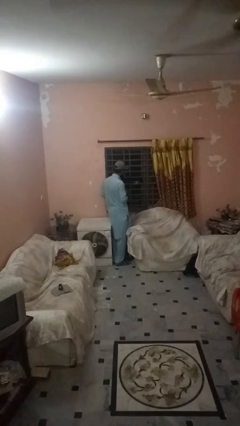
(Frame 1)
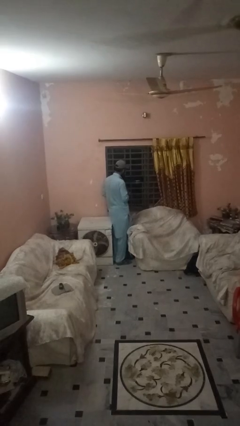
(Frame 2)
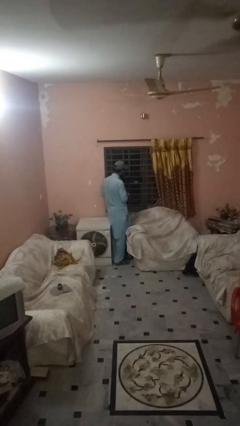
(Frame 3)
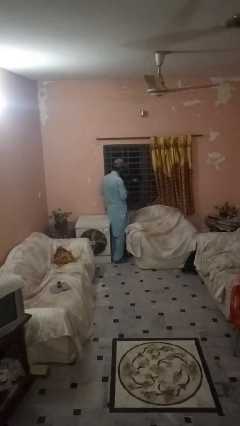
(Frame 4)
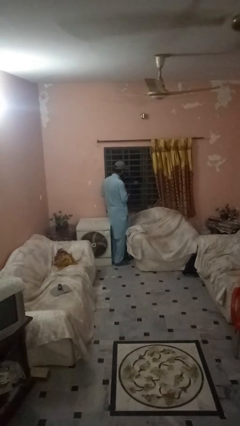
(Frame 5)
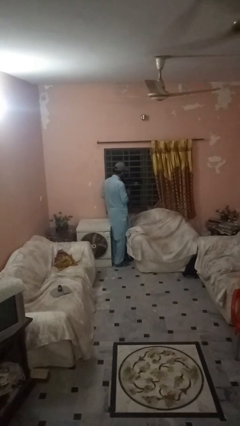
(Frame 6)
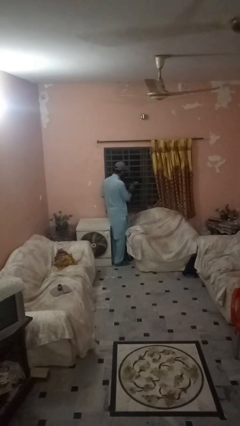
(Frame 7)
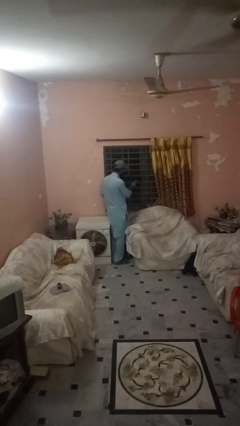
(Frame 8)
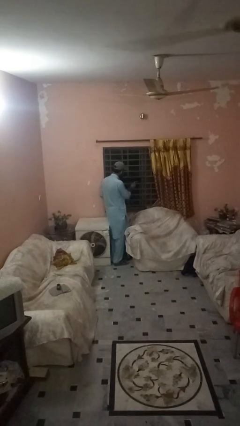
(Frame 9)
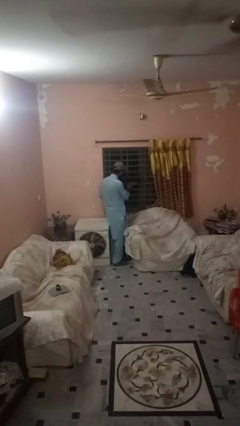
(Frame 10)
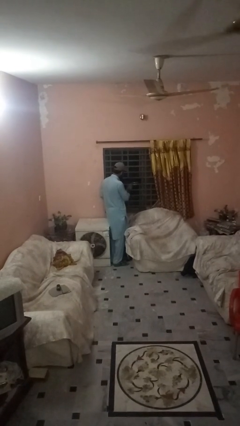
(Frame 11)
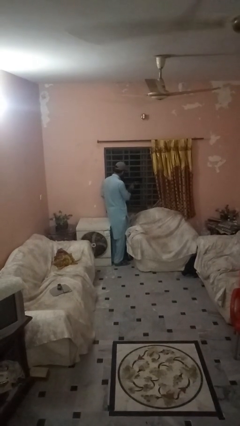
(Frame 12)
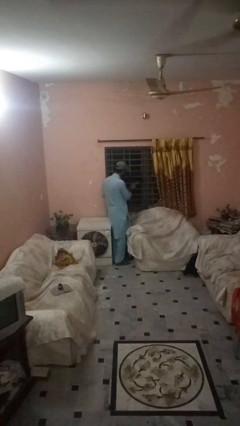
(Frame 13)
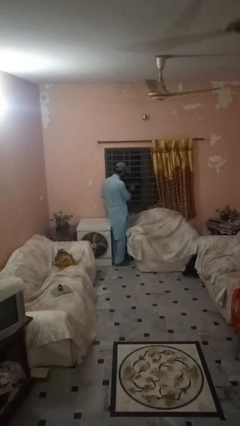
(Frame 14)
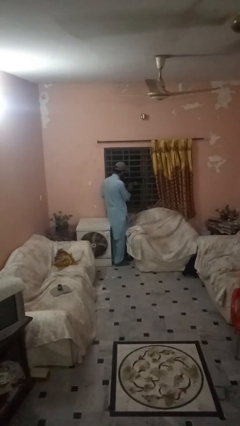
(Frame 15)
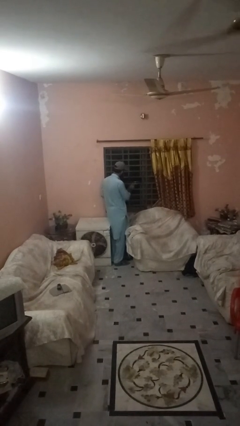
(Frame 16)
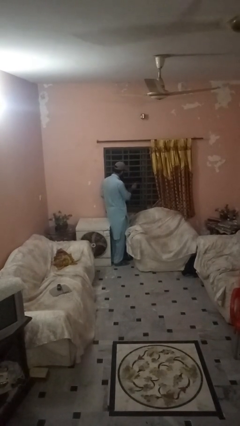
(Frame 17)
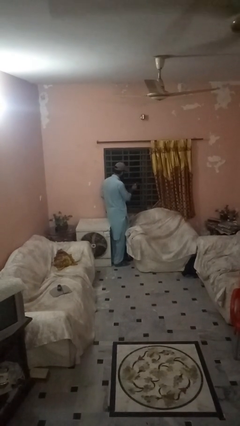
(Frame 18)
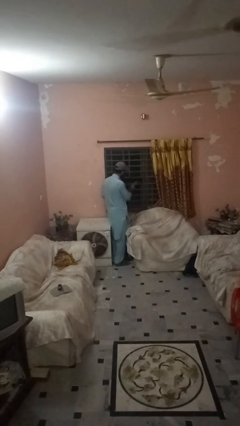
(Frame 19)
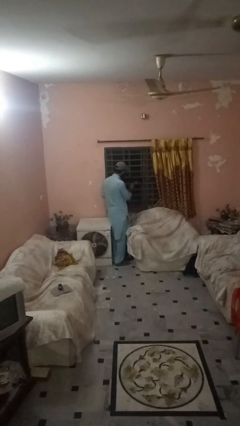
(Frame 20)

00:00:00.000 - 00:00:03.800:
person sprays from bottle

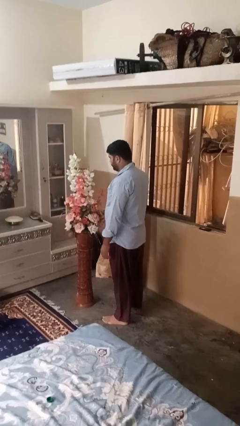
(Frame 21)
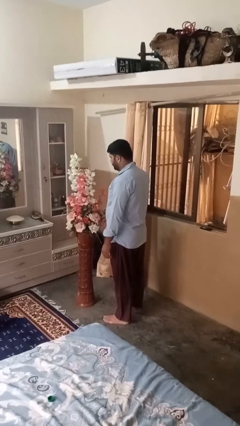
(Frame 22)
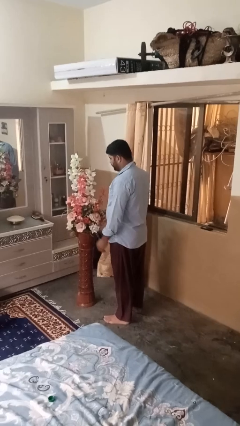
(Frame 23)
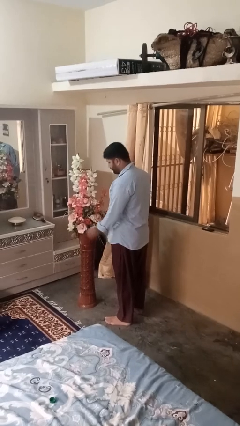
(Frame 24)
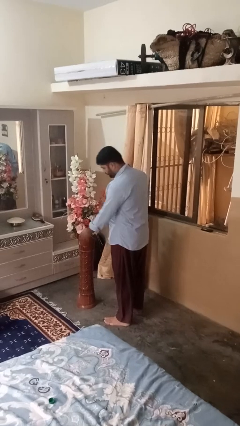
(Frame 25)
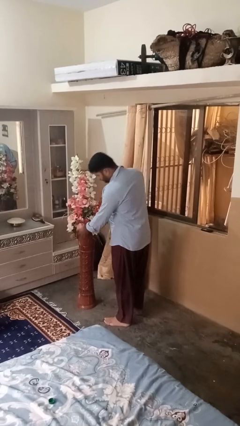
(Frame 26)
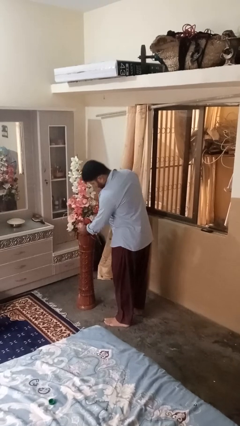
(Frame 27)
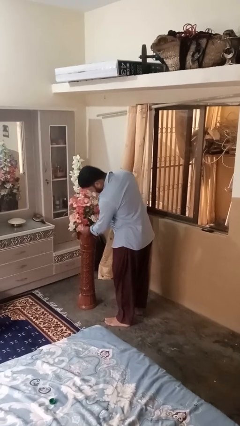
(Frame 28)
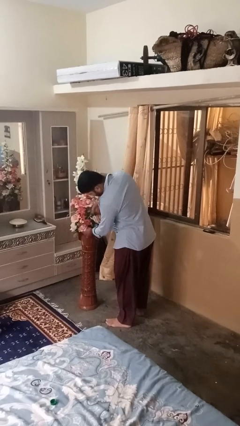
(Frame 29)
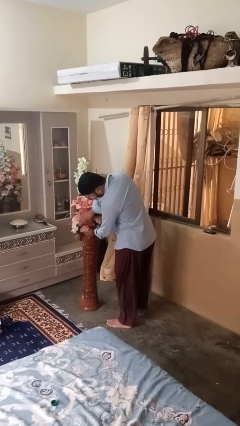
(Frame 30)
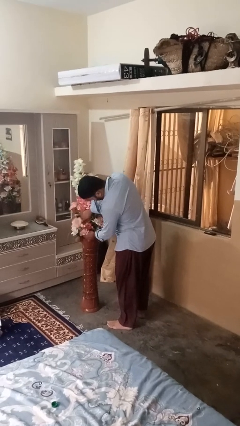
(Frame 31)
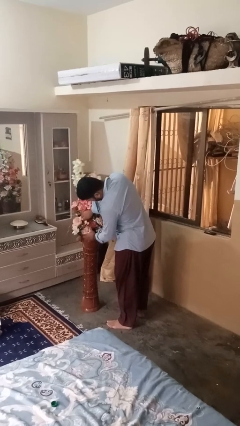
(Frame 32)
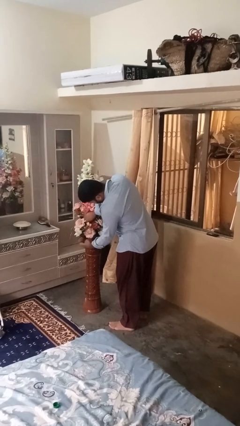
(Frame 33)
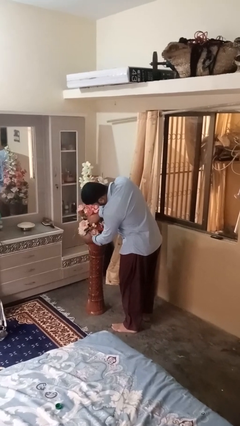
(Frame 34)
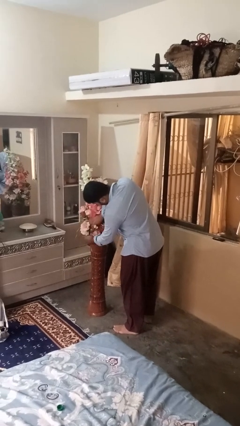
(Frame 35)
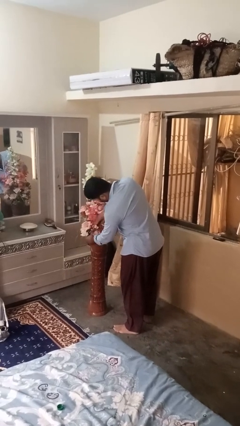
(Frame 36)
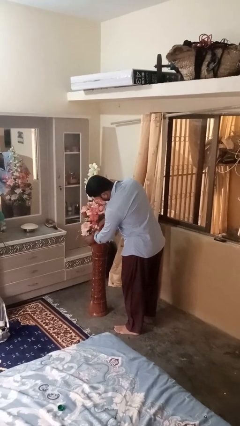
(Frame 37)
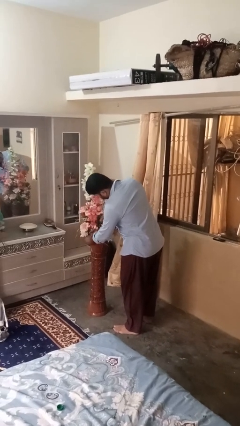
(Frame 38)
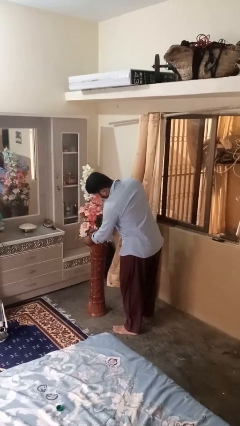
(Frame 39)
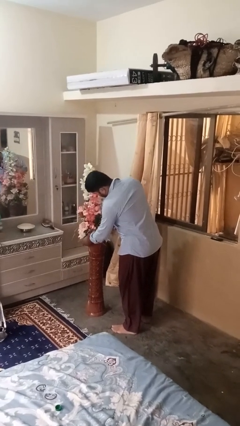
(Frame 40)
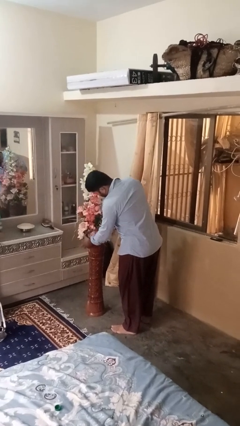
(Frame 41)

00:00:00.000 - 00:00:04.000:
person arranges flowers in vase

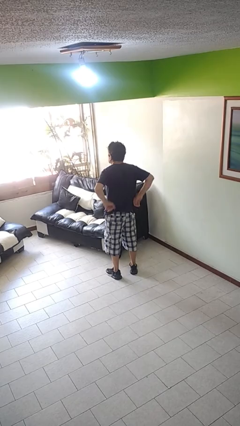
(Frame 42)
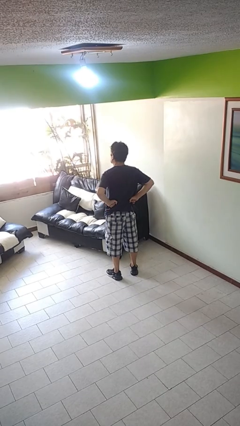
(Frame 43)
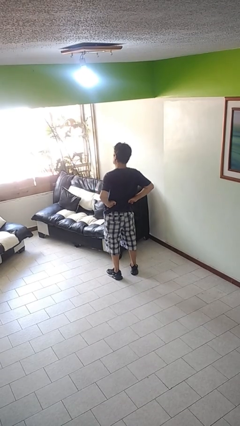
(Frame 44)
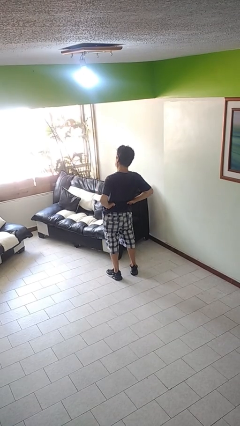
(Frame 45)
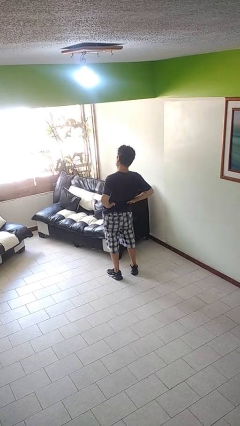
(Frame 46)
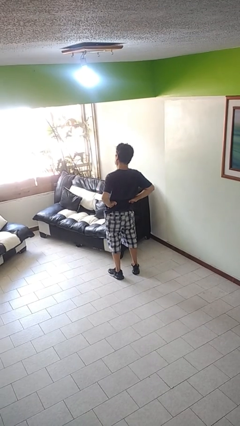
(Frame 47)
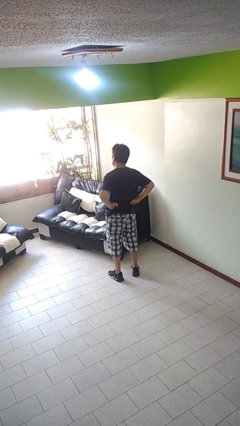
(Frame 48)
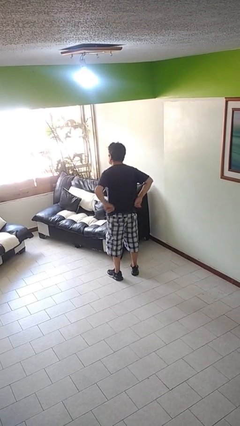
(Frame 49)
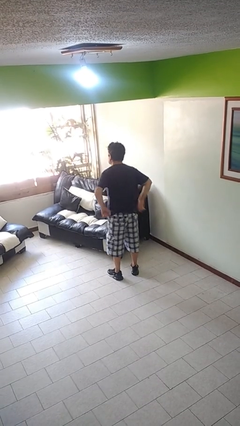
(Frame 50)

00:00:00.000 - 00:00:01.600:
person stretches back

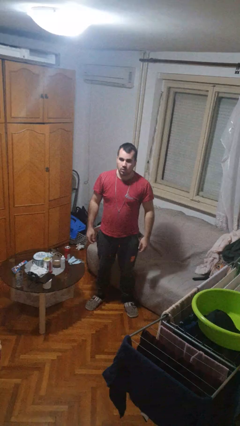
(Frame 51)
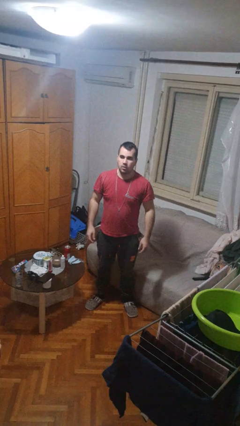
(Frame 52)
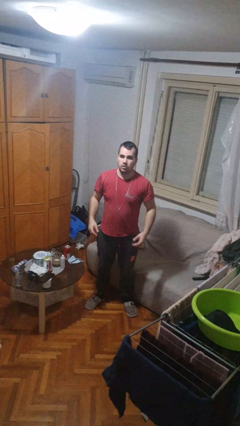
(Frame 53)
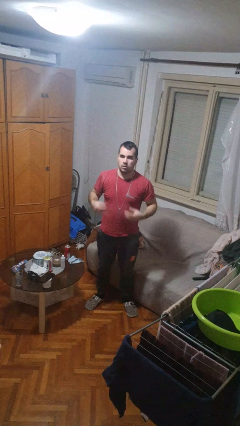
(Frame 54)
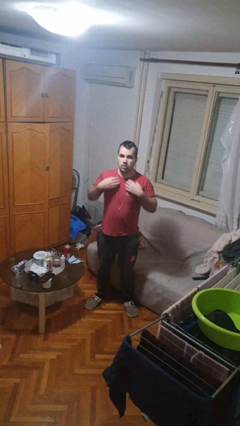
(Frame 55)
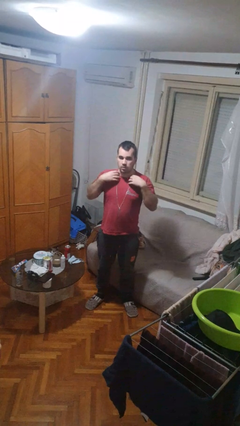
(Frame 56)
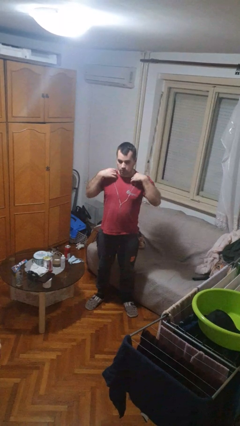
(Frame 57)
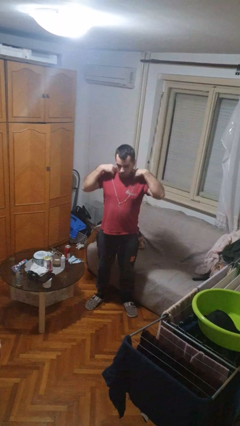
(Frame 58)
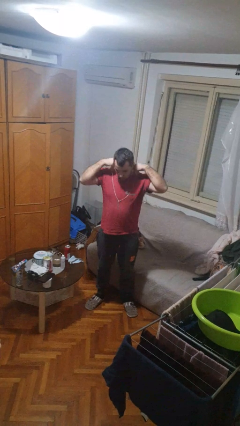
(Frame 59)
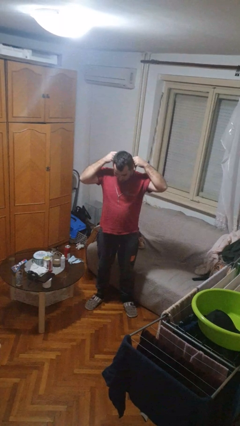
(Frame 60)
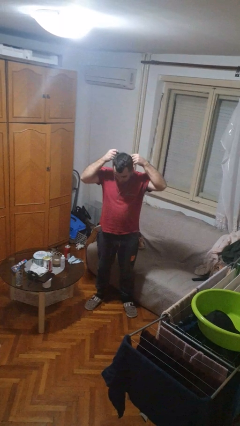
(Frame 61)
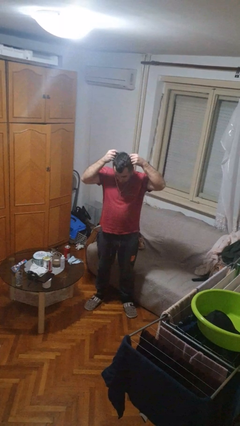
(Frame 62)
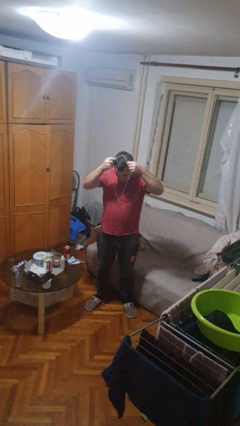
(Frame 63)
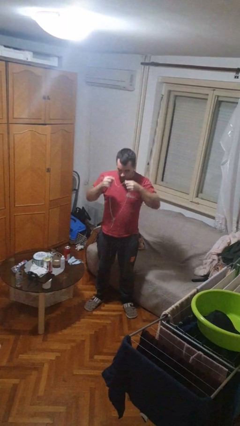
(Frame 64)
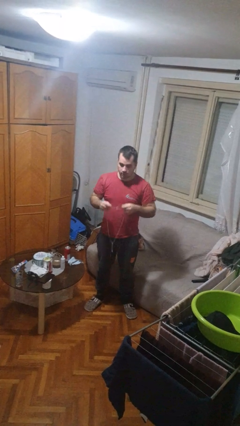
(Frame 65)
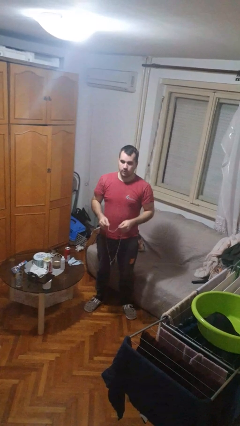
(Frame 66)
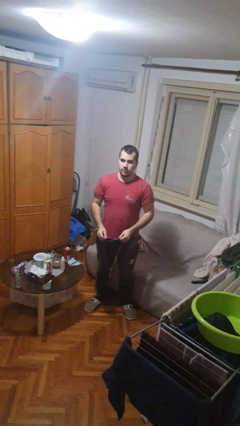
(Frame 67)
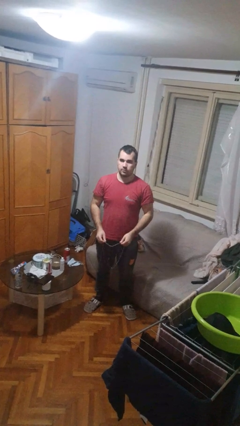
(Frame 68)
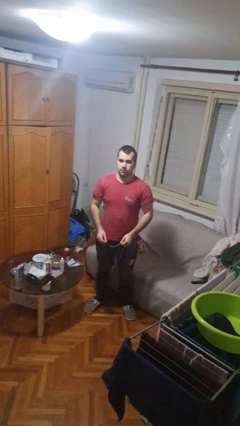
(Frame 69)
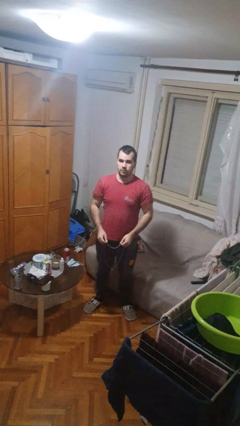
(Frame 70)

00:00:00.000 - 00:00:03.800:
person takes off necklace

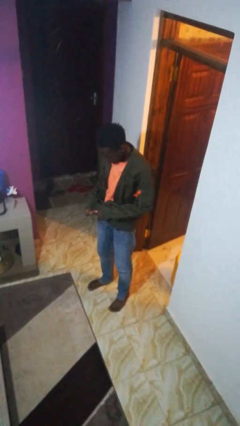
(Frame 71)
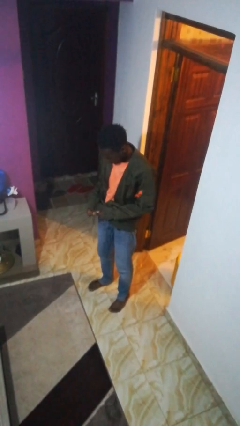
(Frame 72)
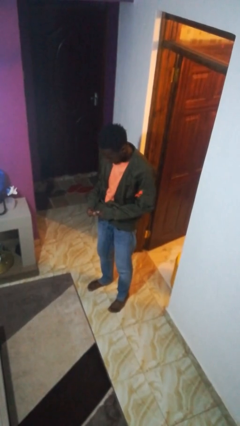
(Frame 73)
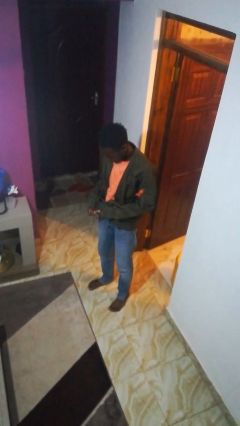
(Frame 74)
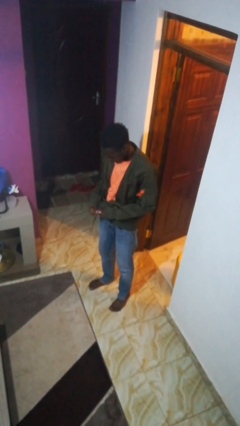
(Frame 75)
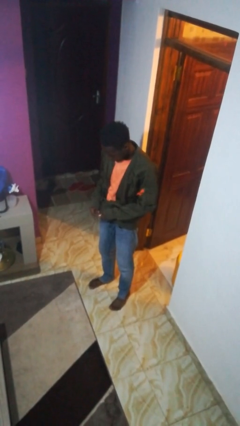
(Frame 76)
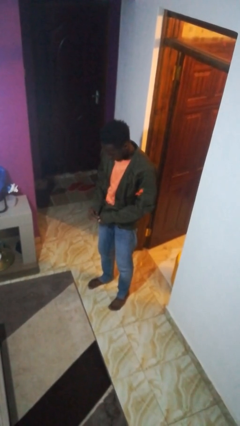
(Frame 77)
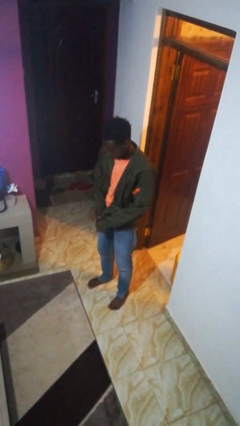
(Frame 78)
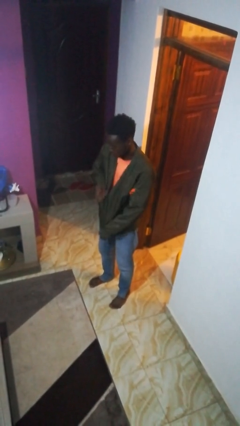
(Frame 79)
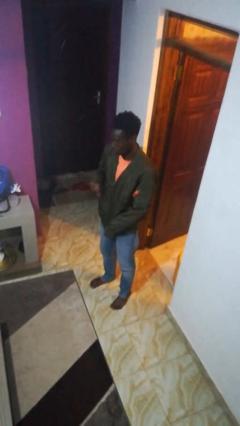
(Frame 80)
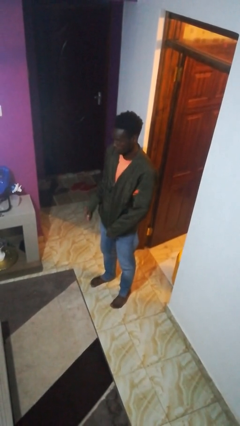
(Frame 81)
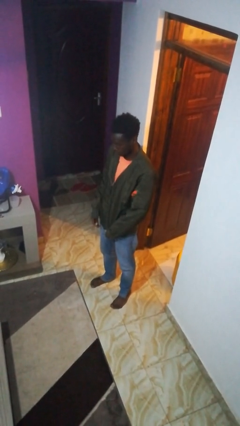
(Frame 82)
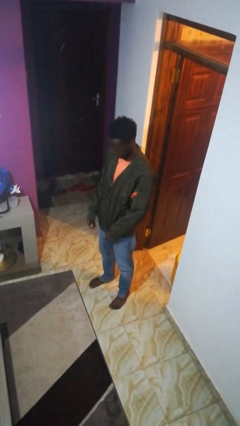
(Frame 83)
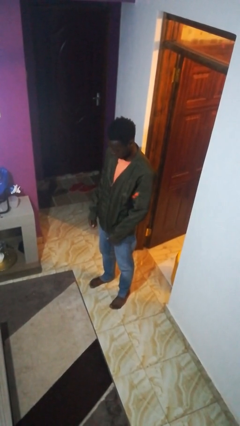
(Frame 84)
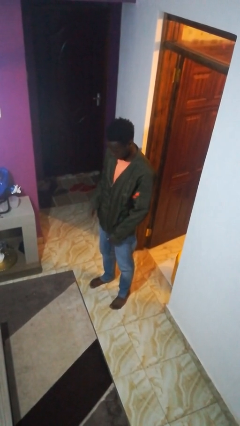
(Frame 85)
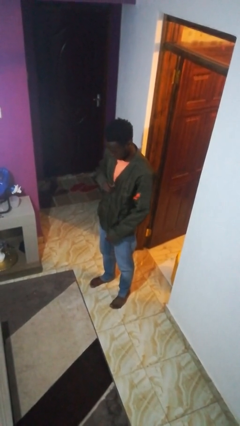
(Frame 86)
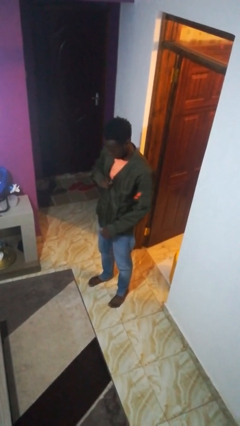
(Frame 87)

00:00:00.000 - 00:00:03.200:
person zips up jacket

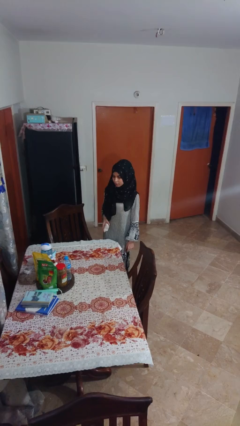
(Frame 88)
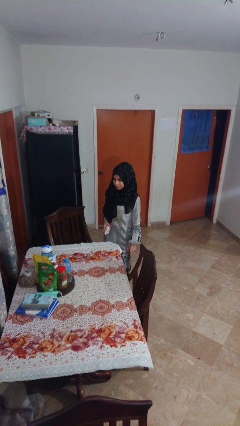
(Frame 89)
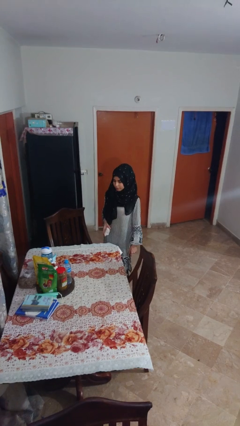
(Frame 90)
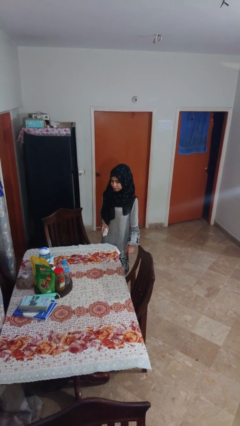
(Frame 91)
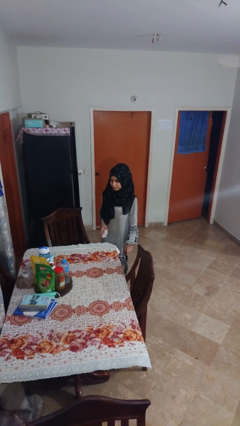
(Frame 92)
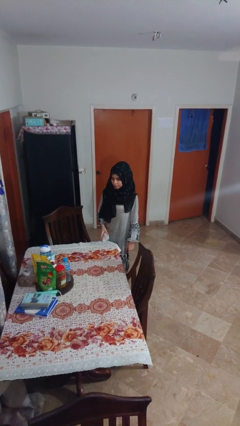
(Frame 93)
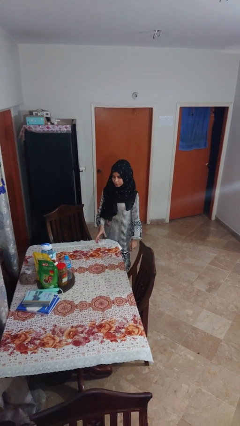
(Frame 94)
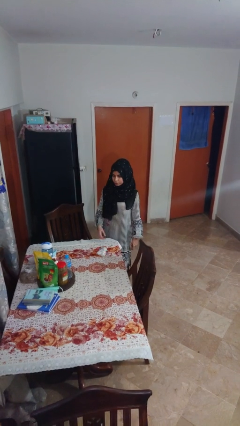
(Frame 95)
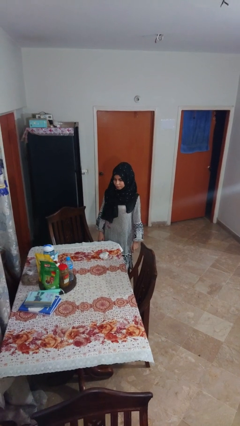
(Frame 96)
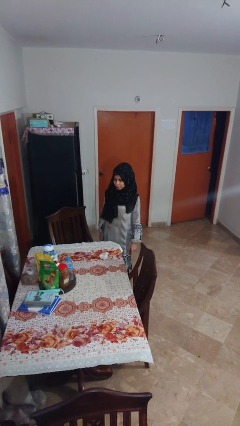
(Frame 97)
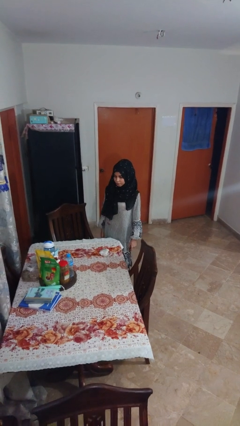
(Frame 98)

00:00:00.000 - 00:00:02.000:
person throws object on table
